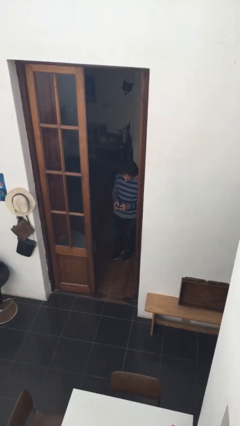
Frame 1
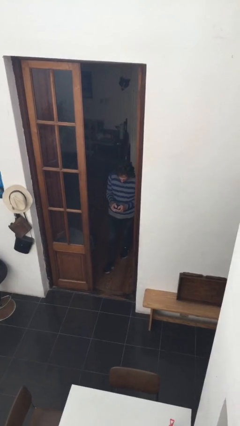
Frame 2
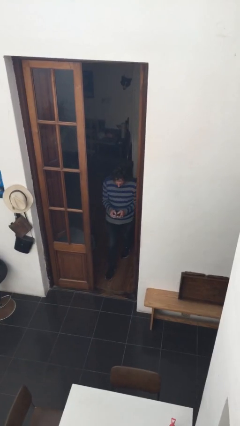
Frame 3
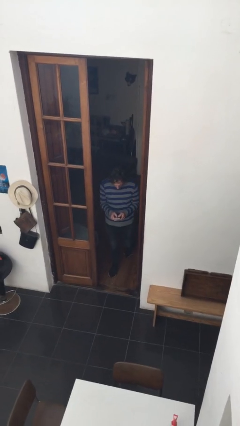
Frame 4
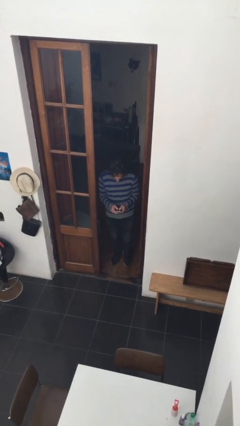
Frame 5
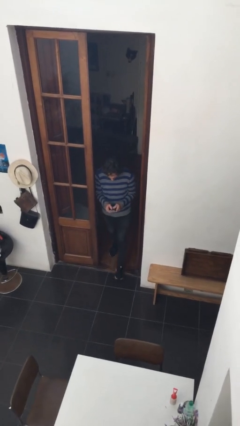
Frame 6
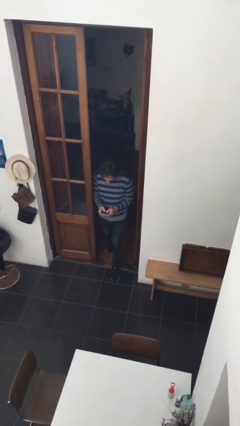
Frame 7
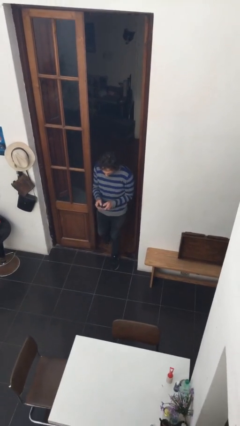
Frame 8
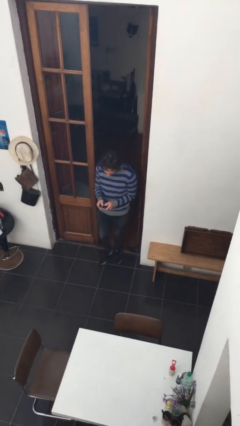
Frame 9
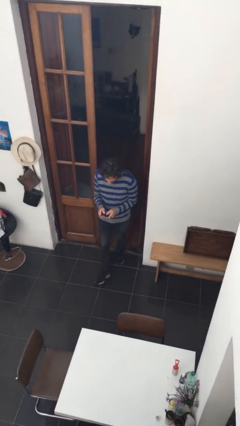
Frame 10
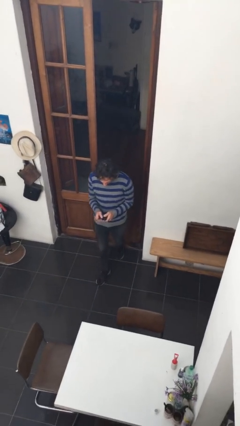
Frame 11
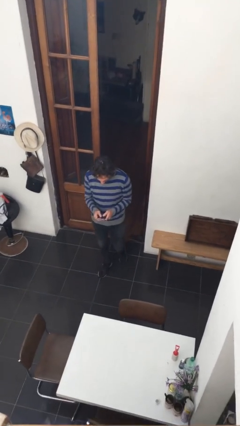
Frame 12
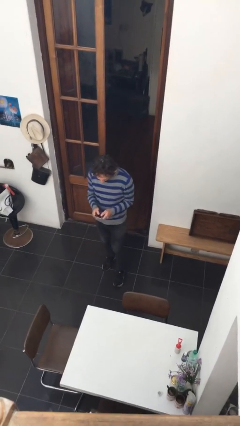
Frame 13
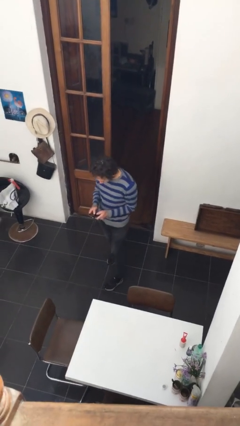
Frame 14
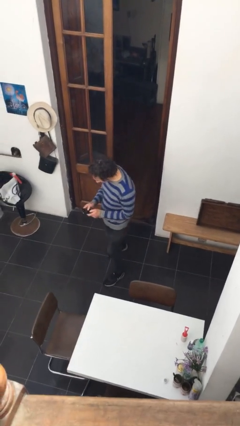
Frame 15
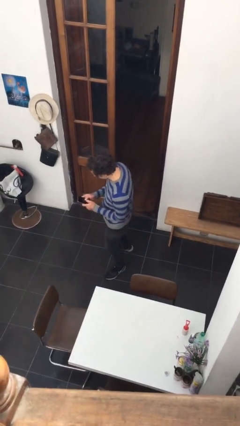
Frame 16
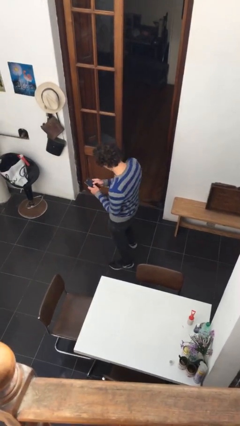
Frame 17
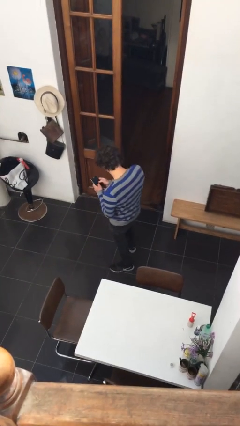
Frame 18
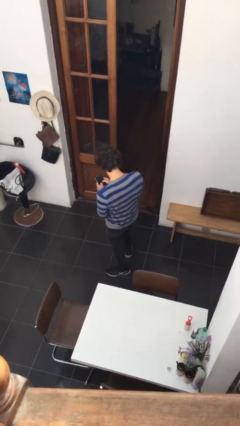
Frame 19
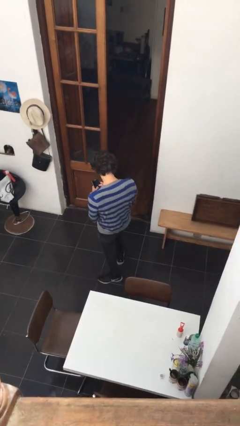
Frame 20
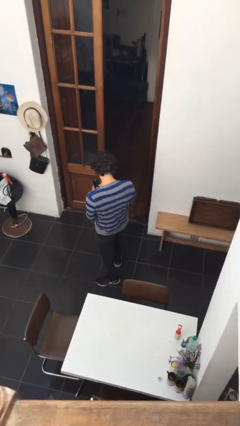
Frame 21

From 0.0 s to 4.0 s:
person enters scene through structure

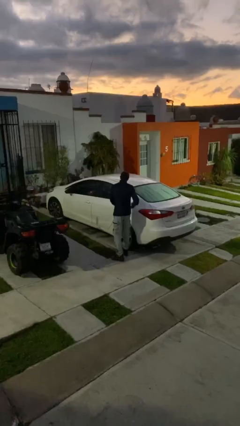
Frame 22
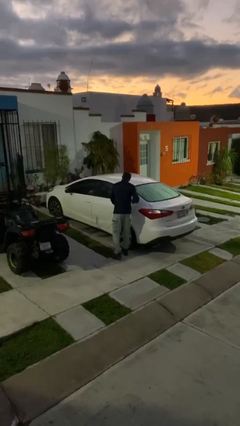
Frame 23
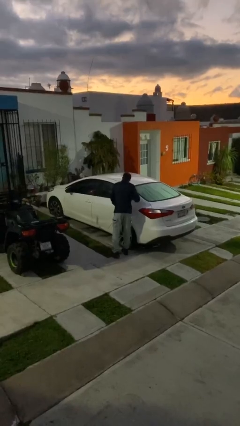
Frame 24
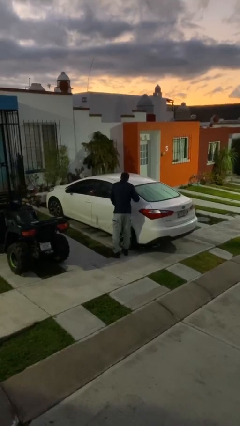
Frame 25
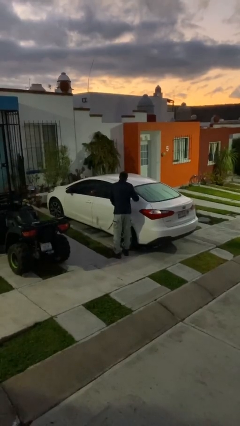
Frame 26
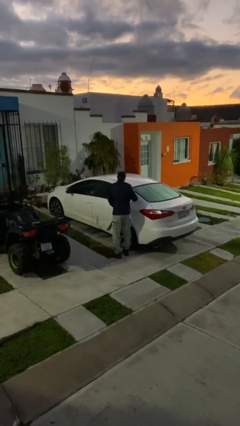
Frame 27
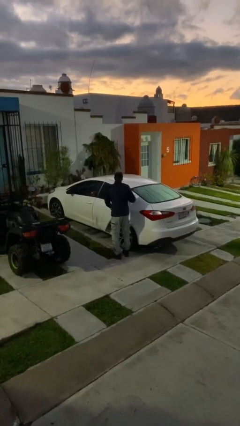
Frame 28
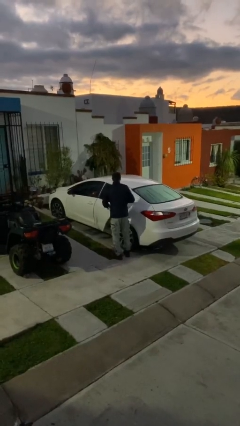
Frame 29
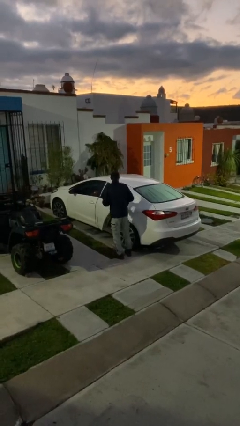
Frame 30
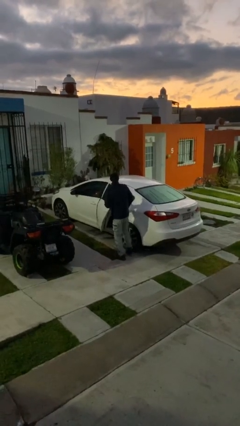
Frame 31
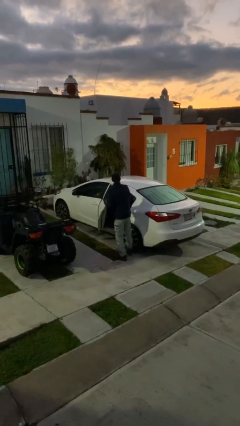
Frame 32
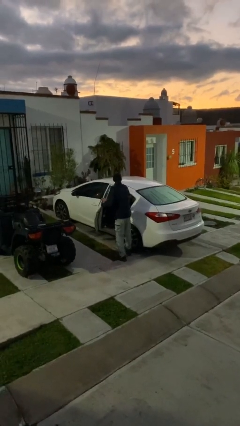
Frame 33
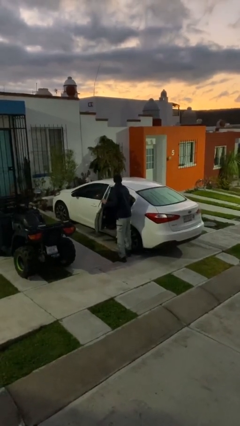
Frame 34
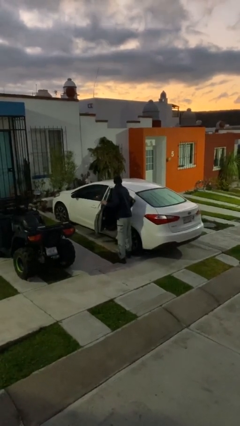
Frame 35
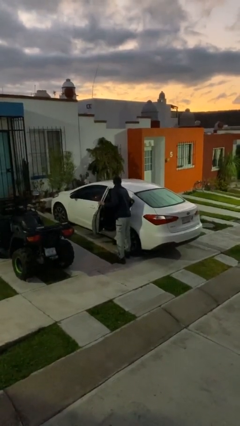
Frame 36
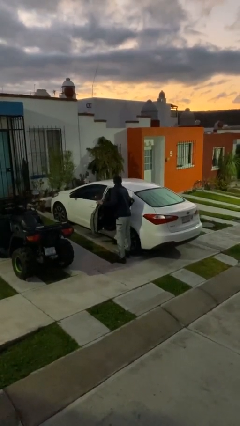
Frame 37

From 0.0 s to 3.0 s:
person opens car door

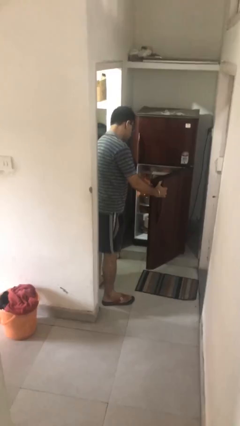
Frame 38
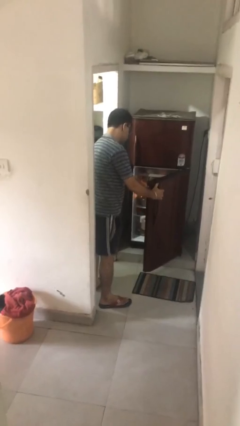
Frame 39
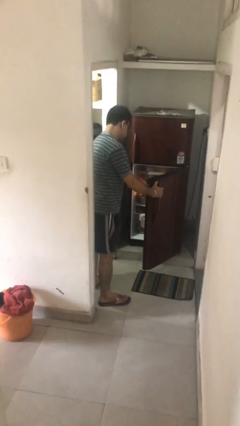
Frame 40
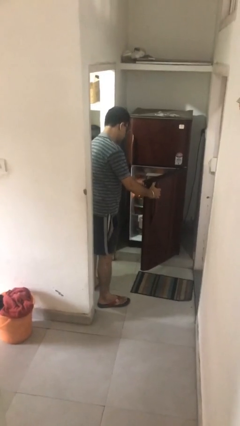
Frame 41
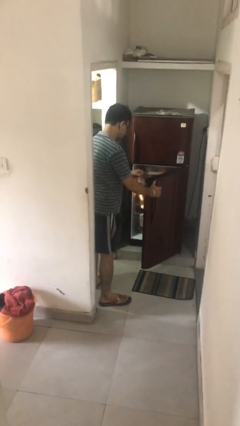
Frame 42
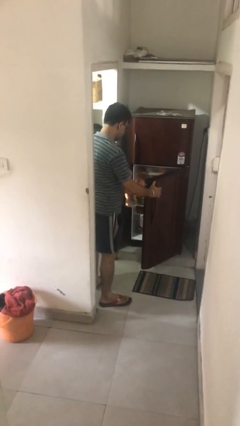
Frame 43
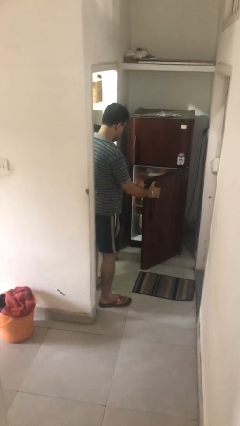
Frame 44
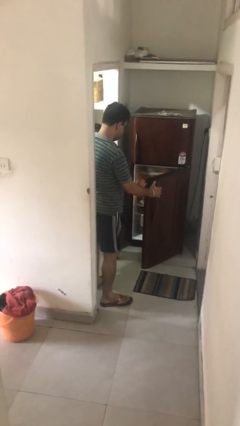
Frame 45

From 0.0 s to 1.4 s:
person takes object from refrigerator

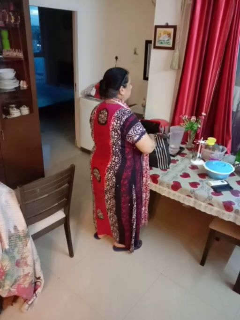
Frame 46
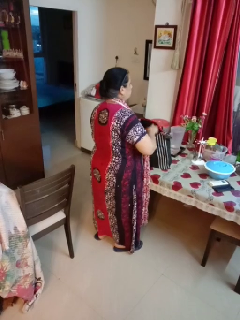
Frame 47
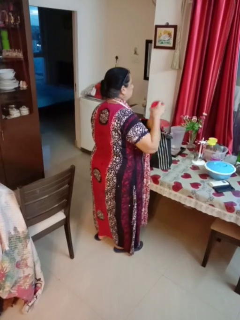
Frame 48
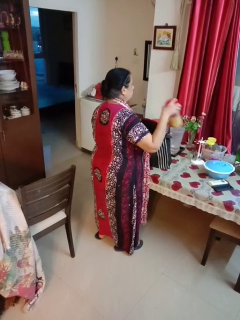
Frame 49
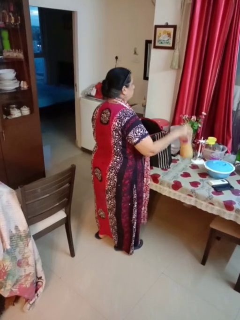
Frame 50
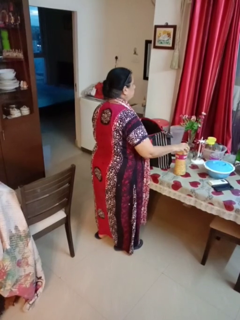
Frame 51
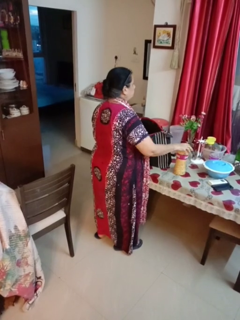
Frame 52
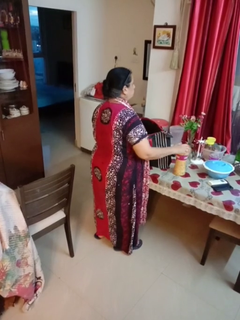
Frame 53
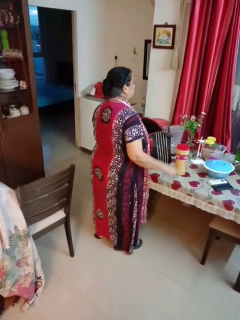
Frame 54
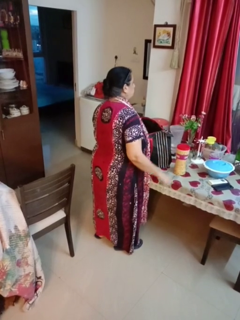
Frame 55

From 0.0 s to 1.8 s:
person takes object from bag

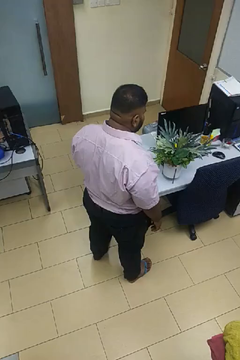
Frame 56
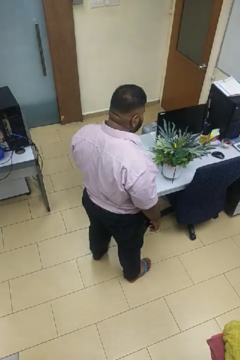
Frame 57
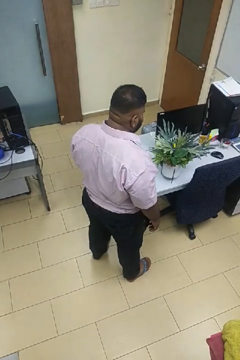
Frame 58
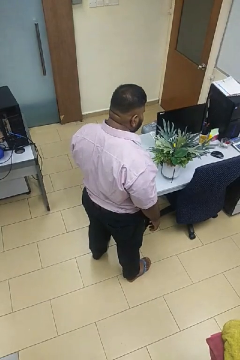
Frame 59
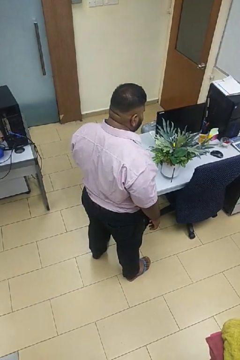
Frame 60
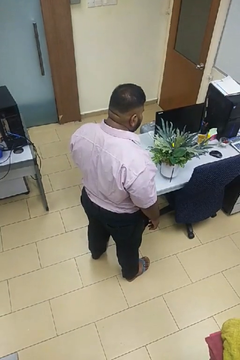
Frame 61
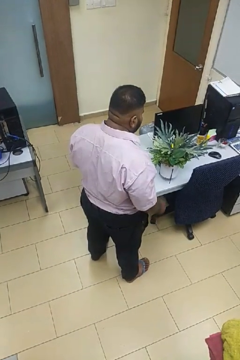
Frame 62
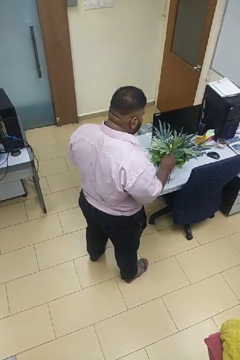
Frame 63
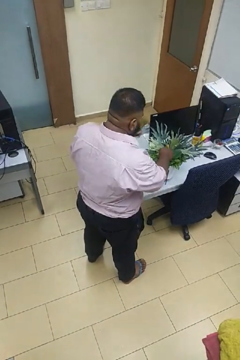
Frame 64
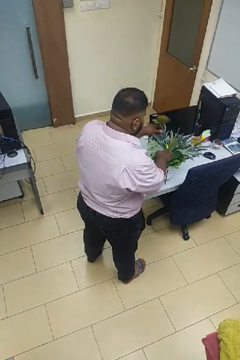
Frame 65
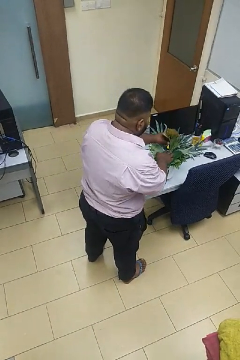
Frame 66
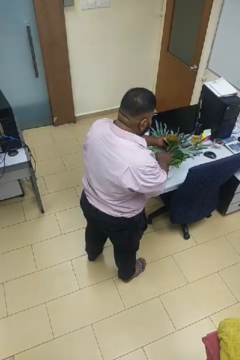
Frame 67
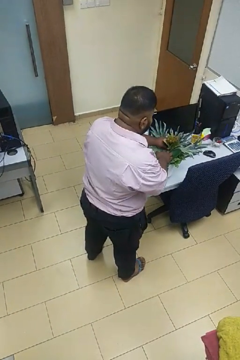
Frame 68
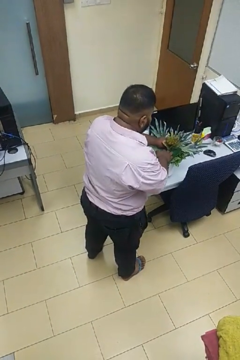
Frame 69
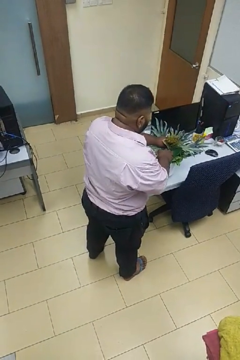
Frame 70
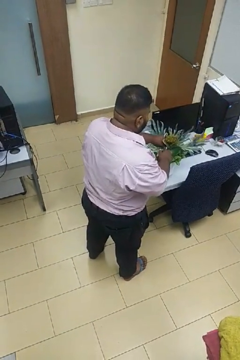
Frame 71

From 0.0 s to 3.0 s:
person arranges flowers in vase

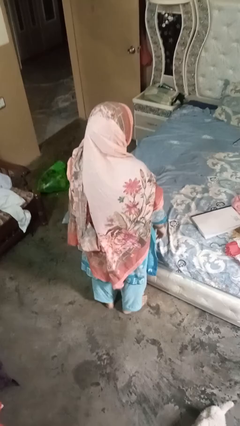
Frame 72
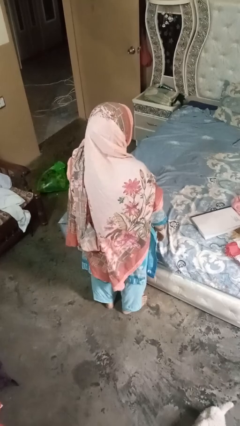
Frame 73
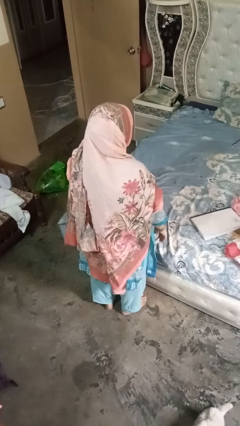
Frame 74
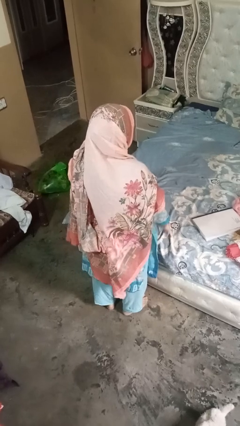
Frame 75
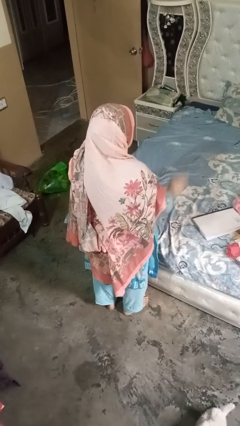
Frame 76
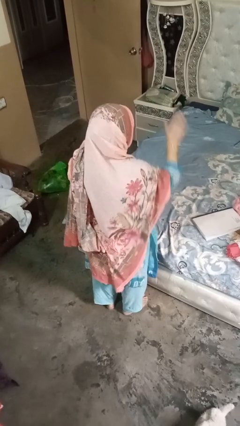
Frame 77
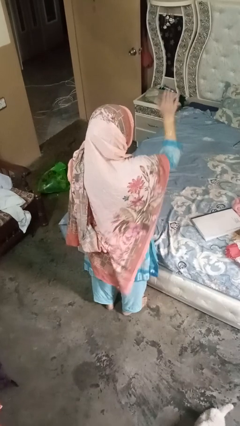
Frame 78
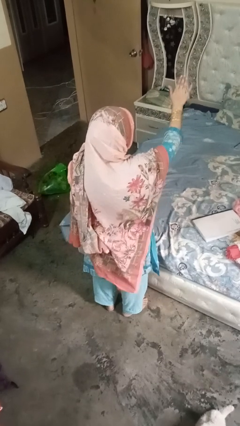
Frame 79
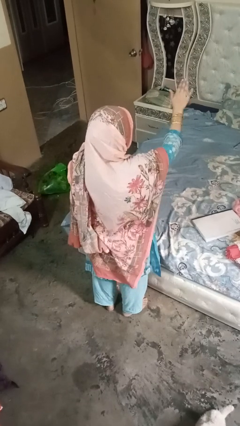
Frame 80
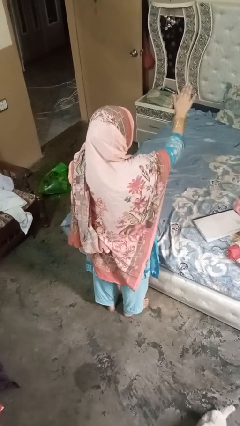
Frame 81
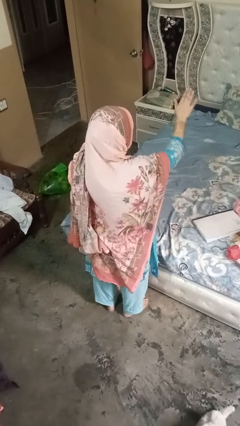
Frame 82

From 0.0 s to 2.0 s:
person gestures stop

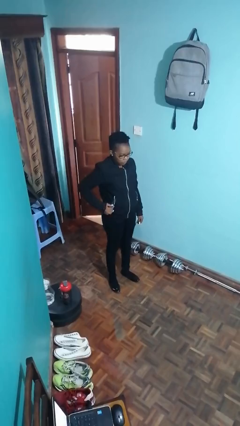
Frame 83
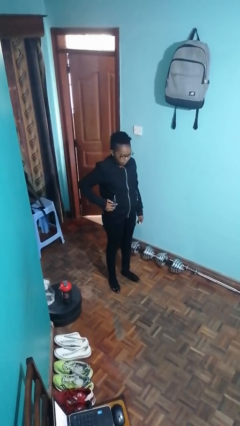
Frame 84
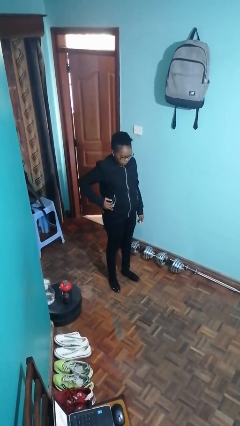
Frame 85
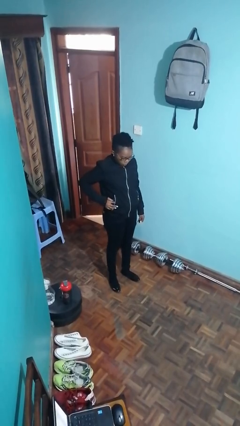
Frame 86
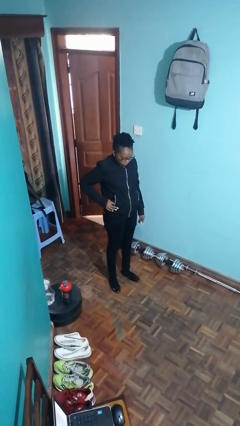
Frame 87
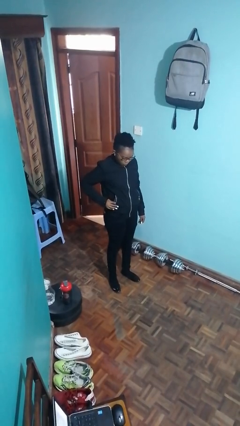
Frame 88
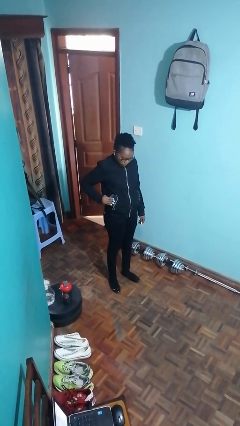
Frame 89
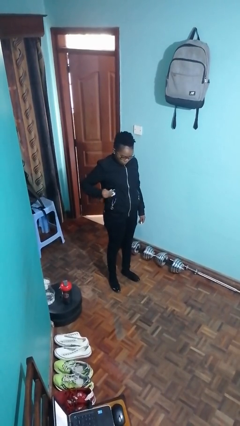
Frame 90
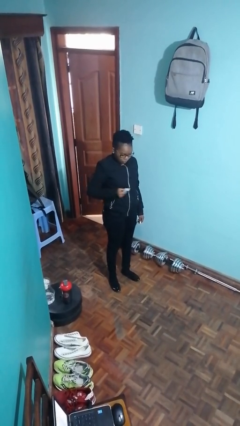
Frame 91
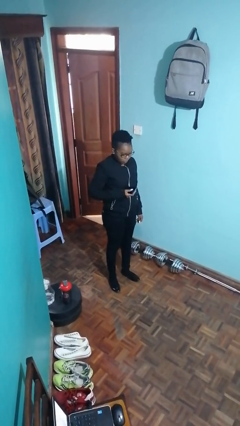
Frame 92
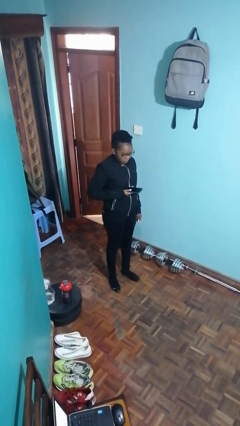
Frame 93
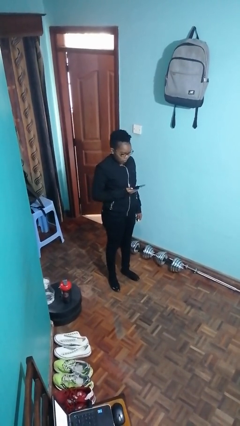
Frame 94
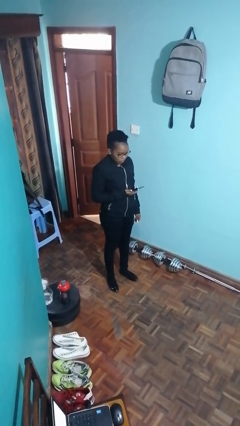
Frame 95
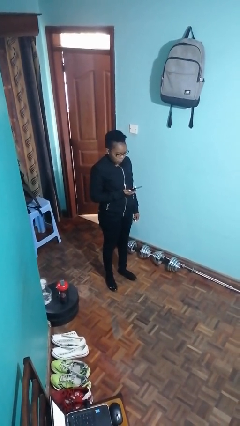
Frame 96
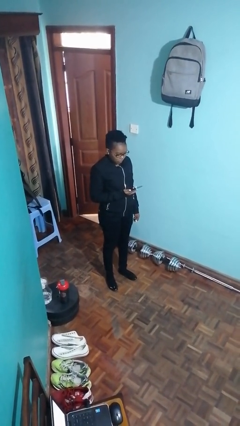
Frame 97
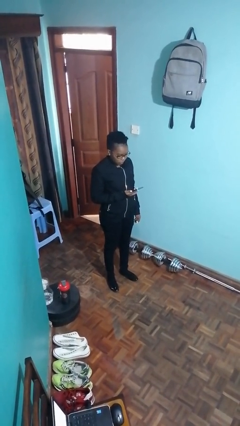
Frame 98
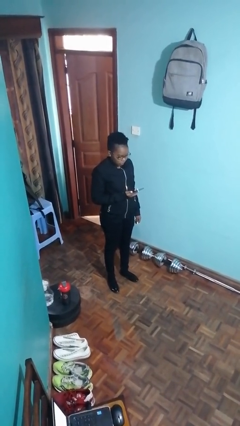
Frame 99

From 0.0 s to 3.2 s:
person takes phone from pocket
